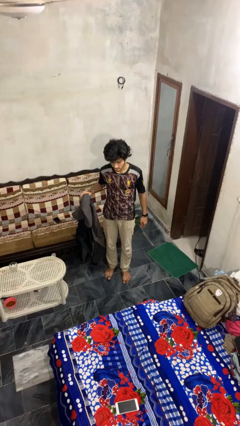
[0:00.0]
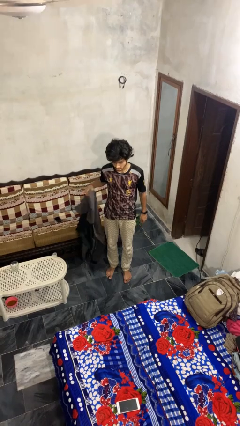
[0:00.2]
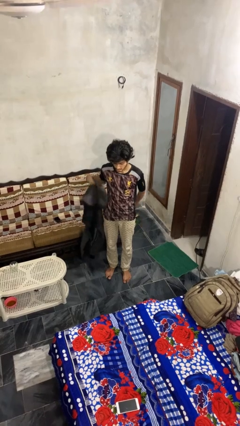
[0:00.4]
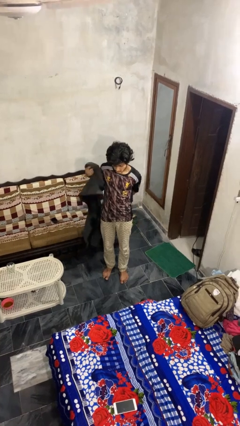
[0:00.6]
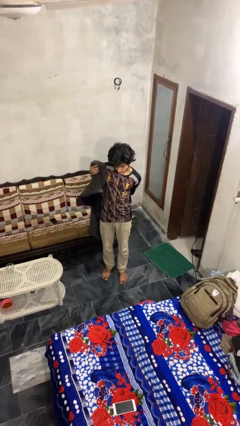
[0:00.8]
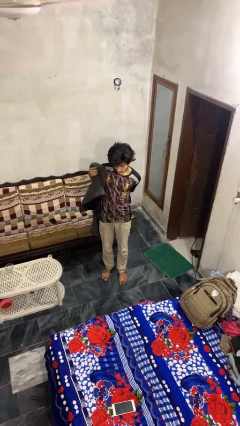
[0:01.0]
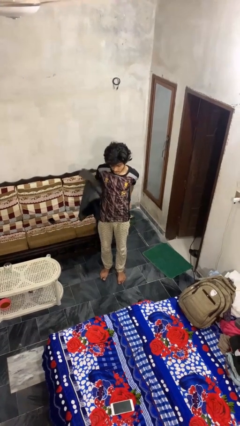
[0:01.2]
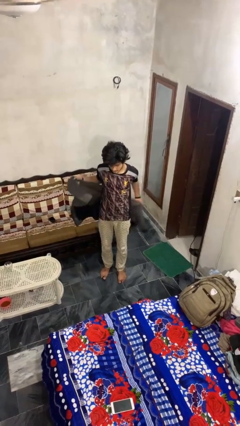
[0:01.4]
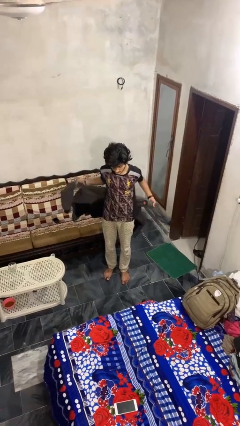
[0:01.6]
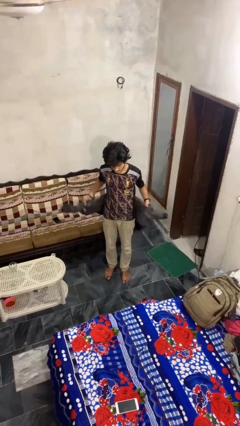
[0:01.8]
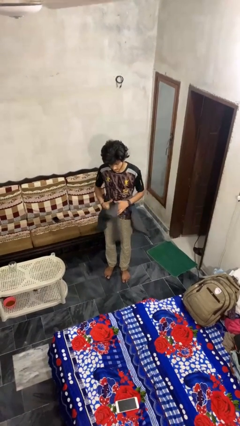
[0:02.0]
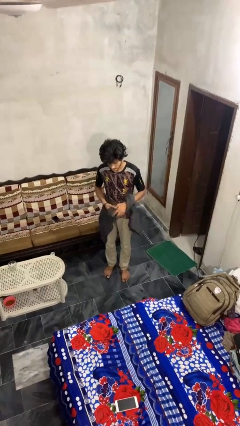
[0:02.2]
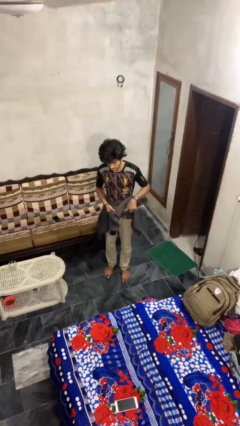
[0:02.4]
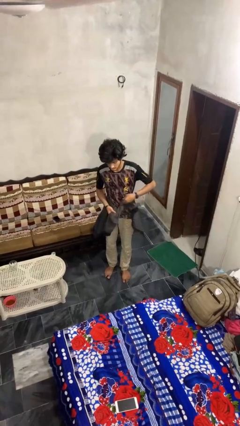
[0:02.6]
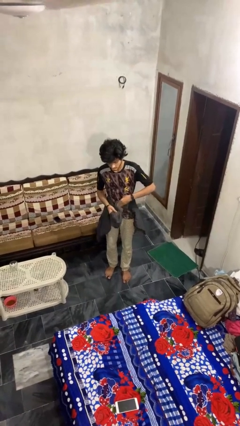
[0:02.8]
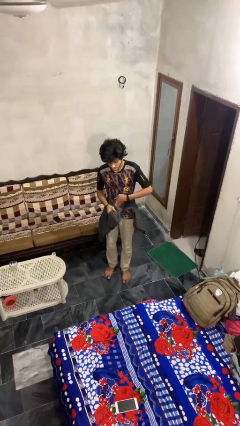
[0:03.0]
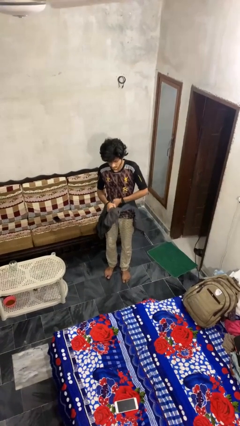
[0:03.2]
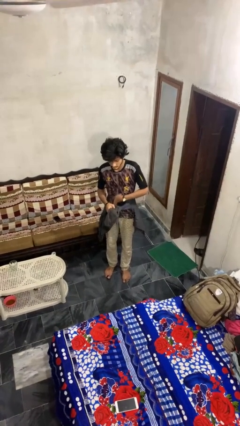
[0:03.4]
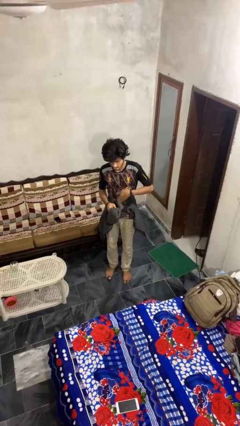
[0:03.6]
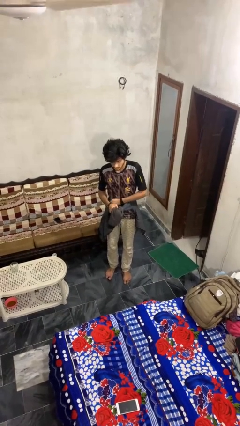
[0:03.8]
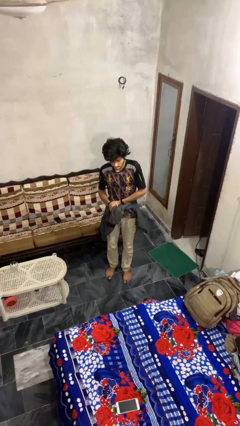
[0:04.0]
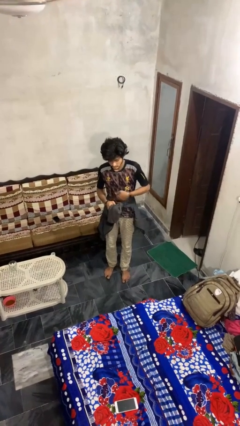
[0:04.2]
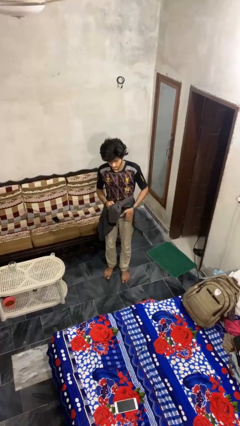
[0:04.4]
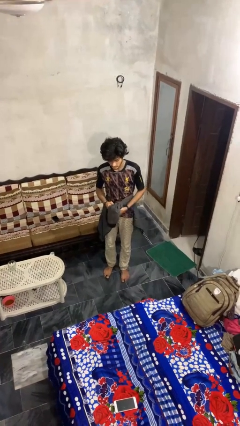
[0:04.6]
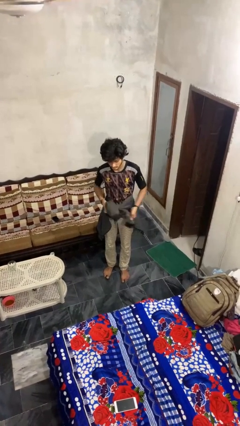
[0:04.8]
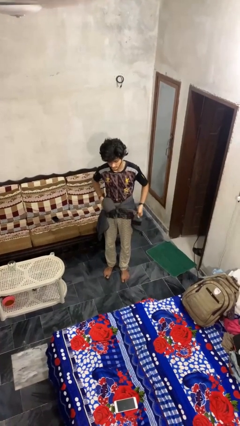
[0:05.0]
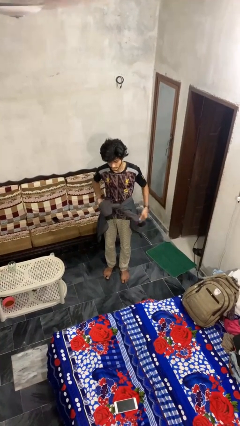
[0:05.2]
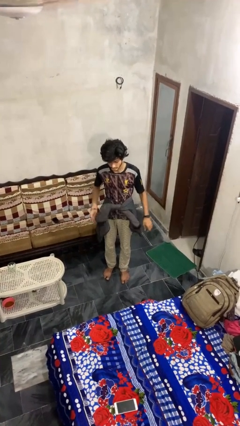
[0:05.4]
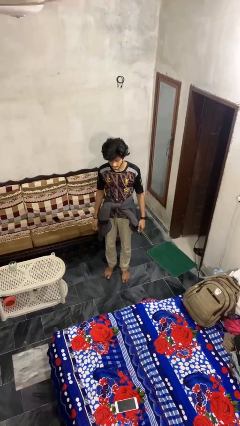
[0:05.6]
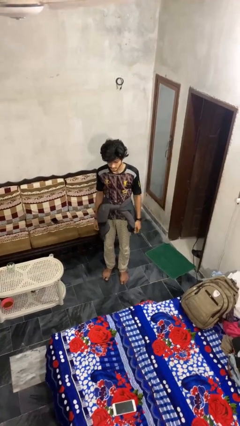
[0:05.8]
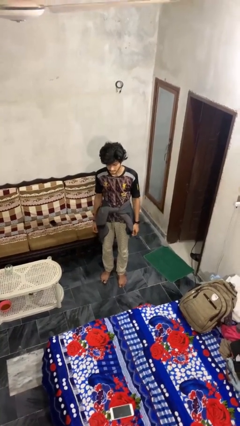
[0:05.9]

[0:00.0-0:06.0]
person ties jacket around waist

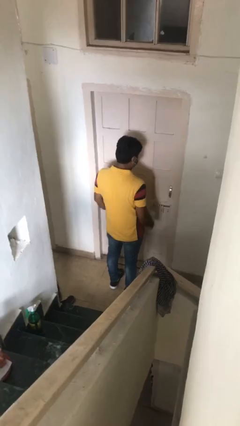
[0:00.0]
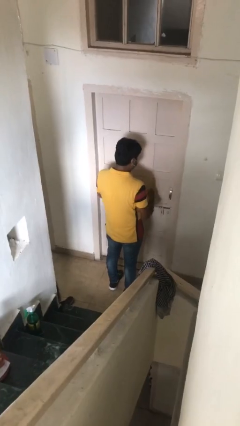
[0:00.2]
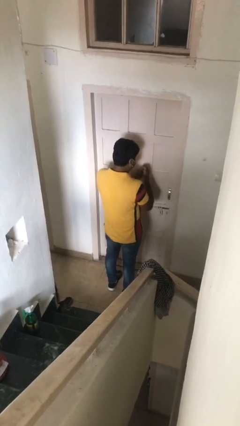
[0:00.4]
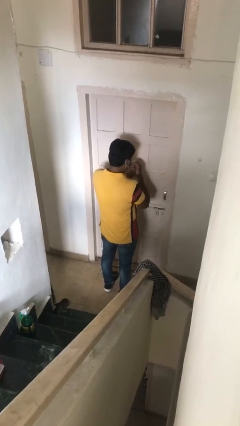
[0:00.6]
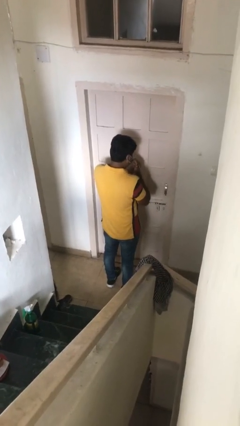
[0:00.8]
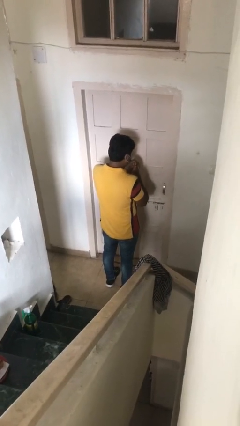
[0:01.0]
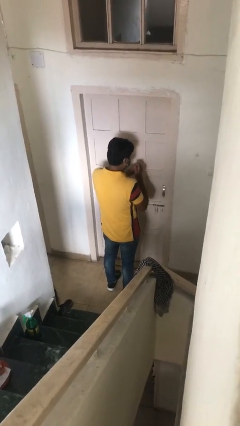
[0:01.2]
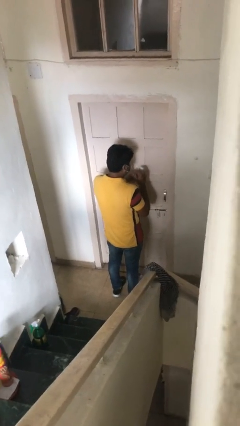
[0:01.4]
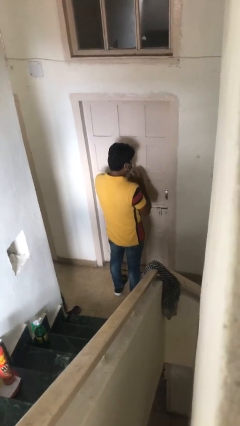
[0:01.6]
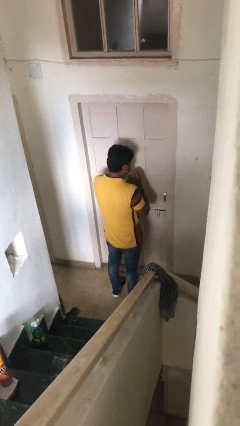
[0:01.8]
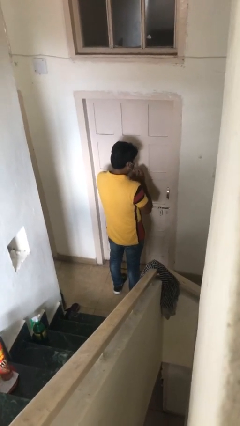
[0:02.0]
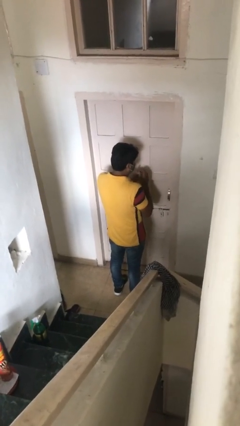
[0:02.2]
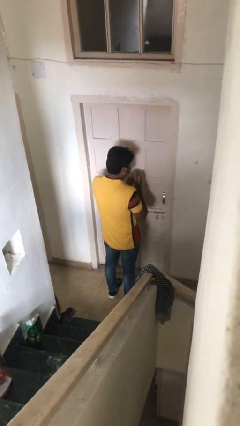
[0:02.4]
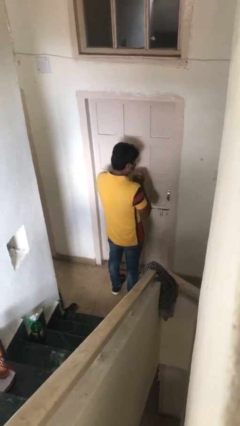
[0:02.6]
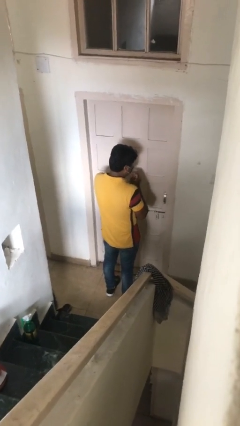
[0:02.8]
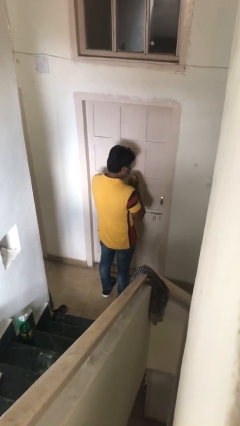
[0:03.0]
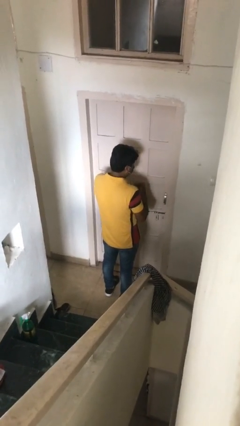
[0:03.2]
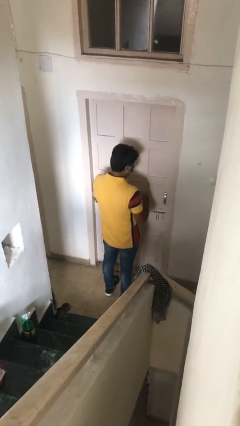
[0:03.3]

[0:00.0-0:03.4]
person cracks knuckles

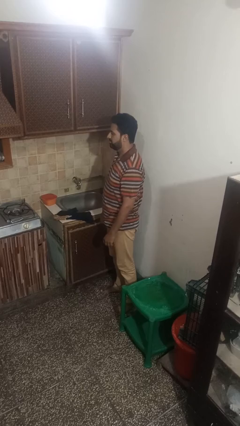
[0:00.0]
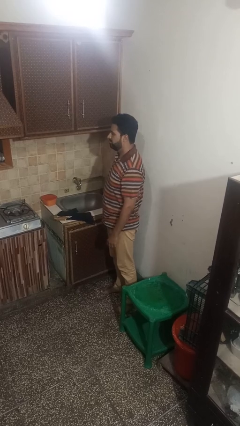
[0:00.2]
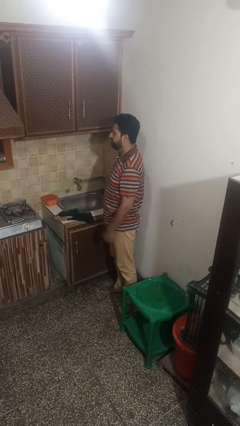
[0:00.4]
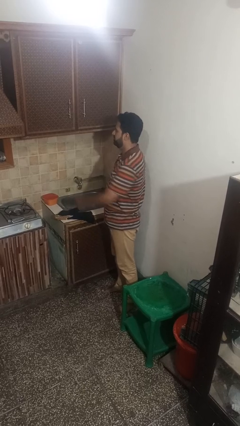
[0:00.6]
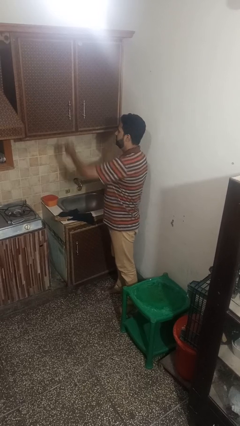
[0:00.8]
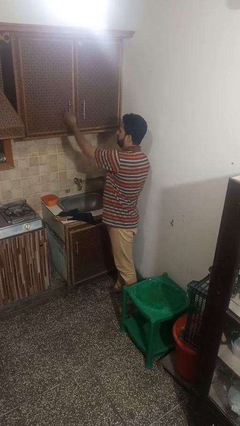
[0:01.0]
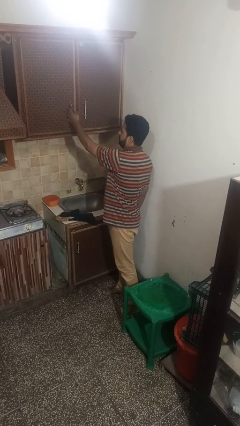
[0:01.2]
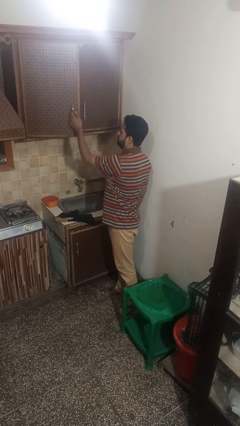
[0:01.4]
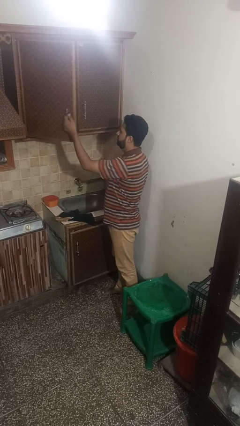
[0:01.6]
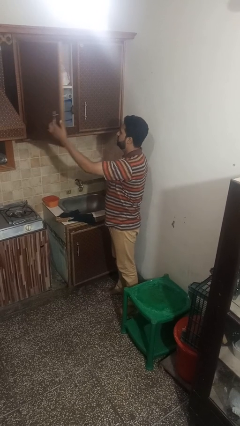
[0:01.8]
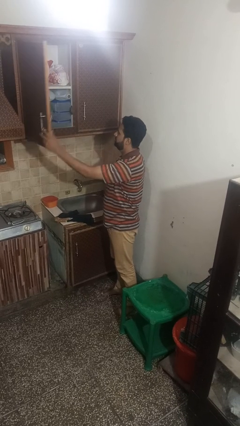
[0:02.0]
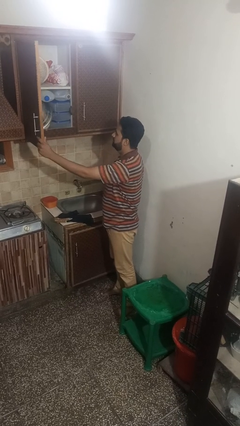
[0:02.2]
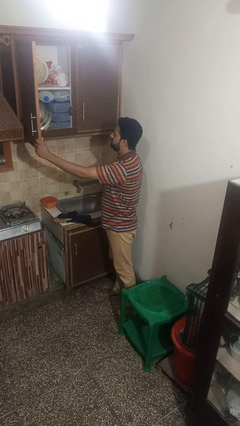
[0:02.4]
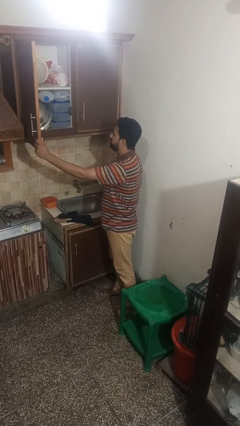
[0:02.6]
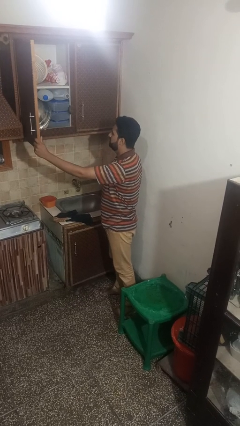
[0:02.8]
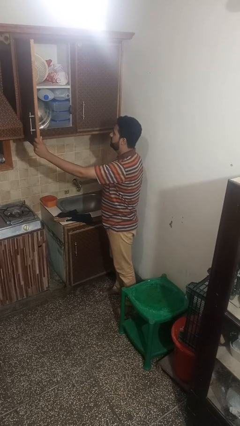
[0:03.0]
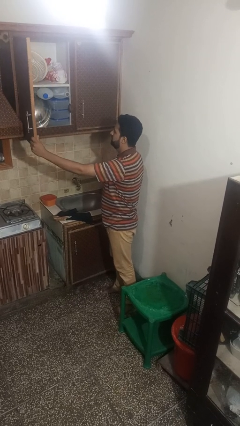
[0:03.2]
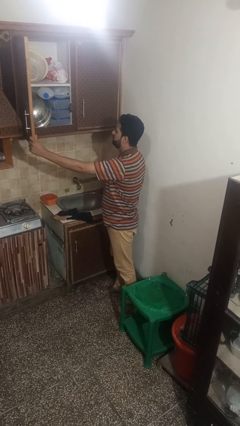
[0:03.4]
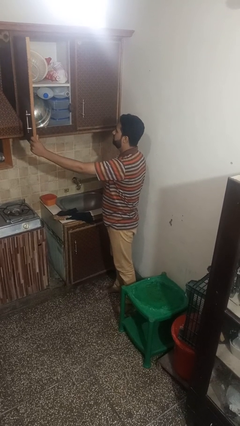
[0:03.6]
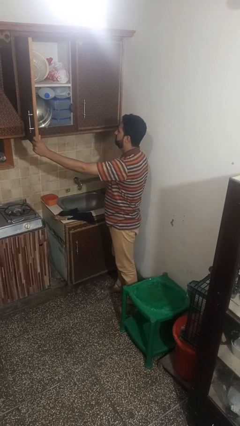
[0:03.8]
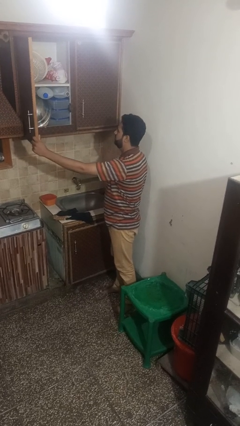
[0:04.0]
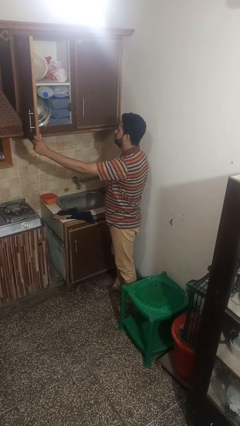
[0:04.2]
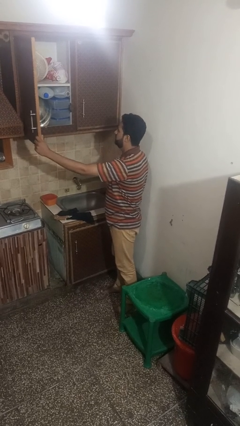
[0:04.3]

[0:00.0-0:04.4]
person opens cabinet

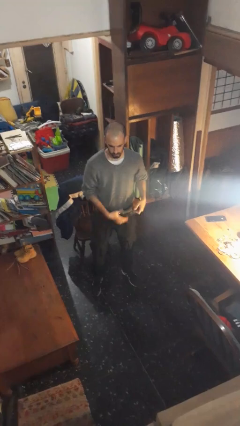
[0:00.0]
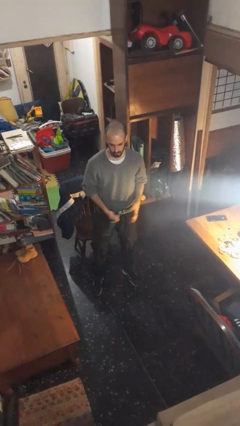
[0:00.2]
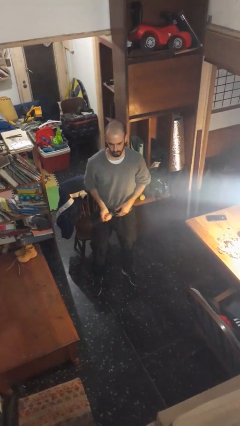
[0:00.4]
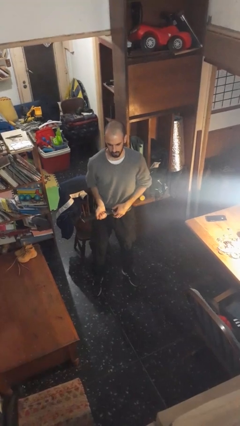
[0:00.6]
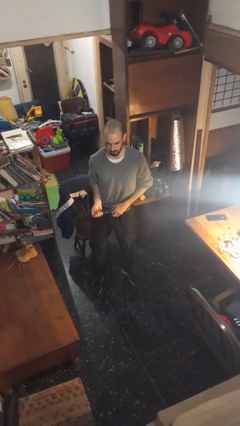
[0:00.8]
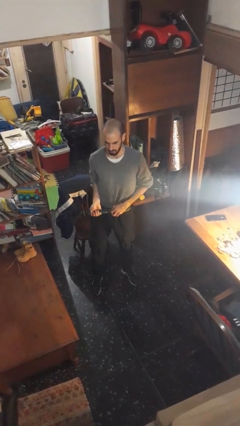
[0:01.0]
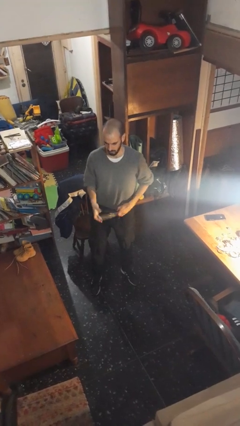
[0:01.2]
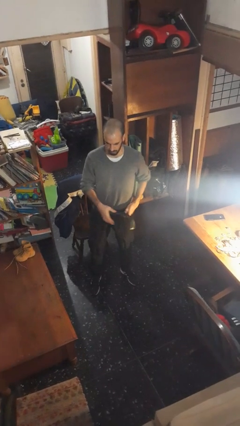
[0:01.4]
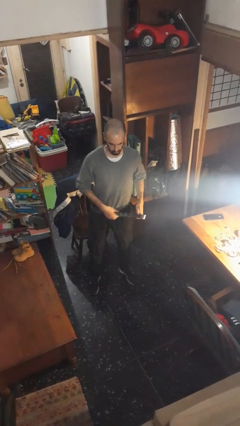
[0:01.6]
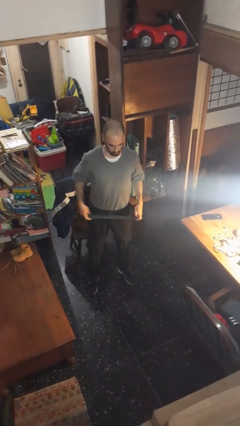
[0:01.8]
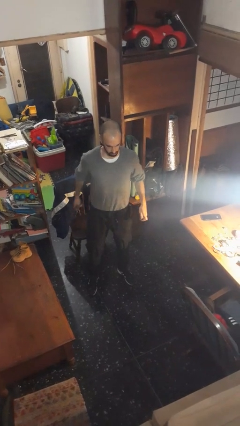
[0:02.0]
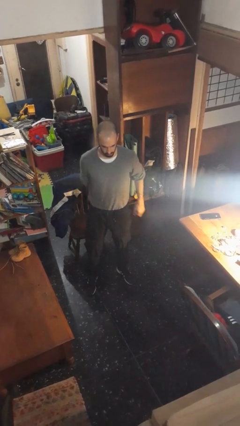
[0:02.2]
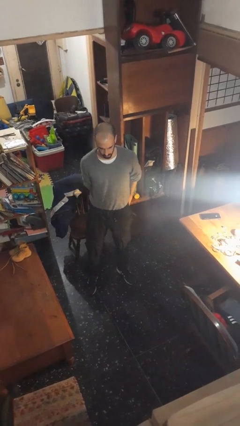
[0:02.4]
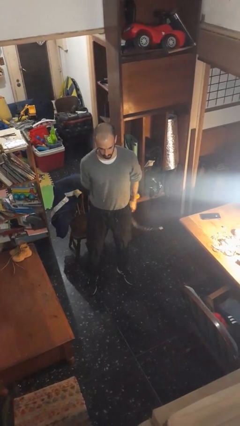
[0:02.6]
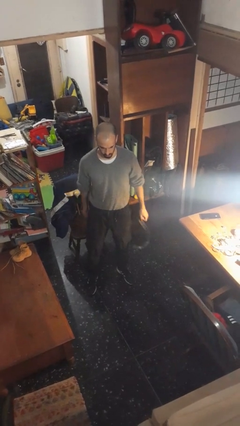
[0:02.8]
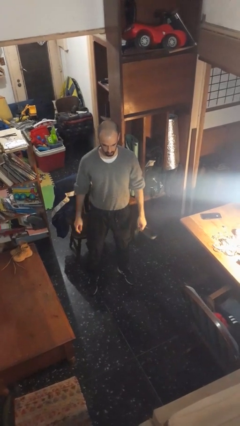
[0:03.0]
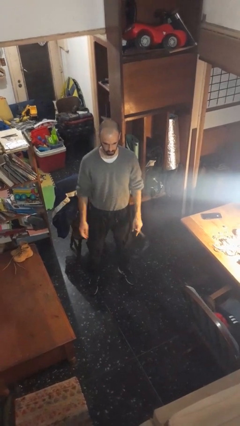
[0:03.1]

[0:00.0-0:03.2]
person takes off belt

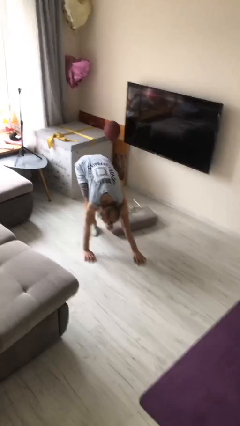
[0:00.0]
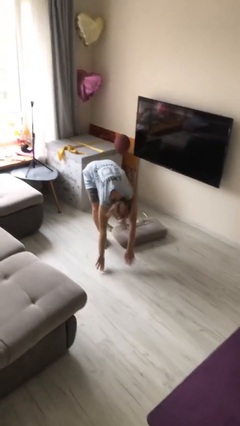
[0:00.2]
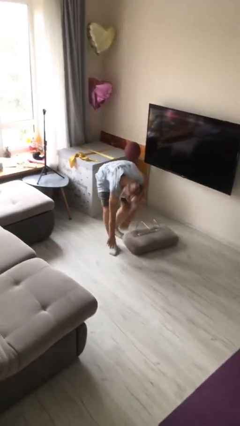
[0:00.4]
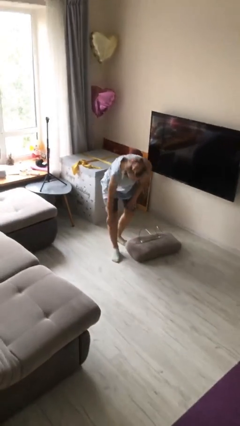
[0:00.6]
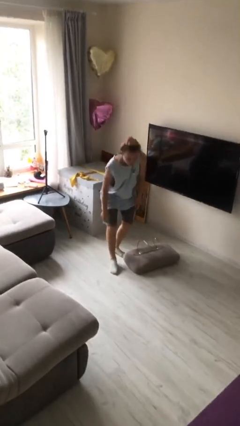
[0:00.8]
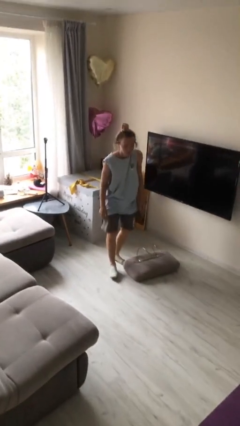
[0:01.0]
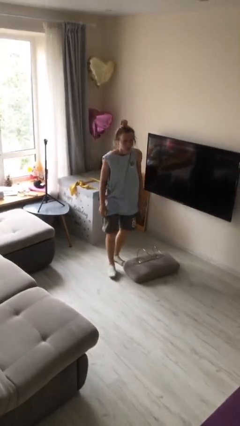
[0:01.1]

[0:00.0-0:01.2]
person stands up from floor
